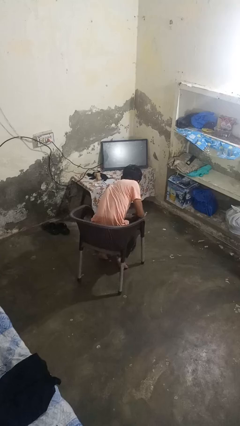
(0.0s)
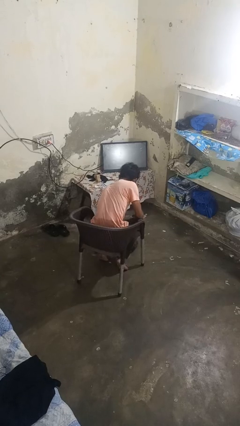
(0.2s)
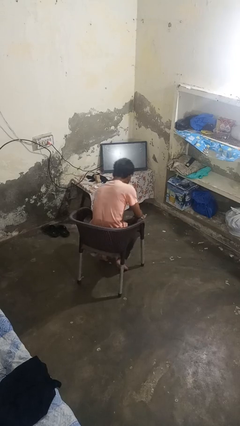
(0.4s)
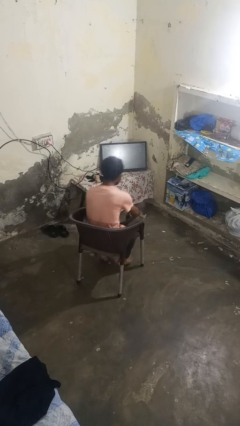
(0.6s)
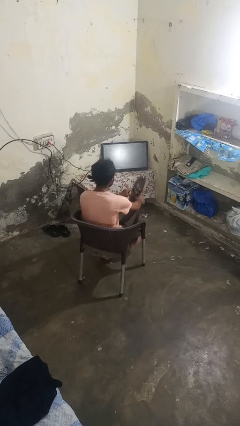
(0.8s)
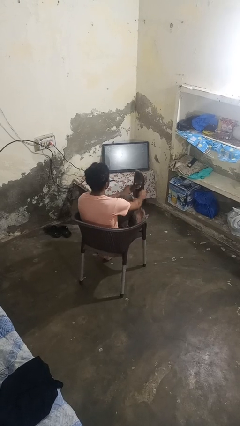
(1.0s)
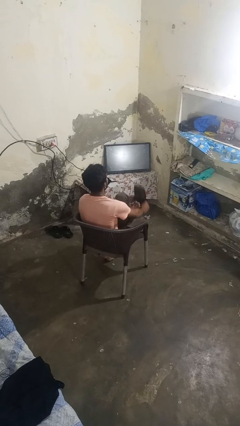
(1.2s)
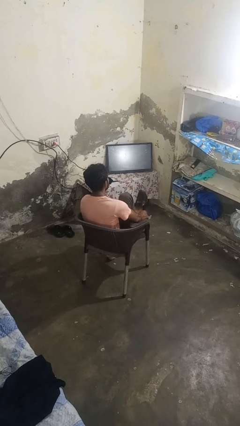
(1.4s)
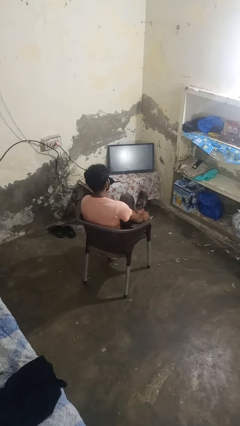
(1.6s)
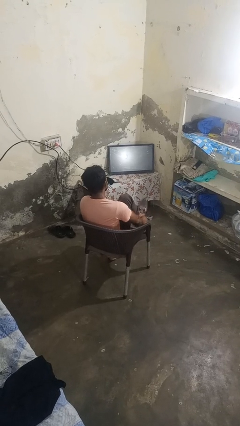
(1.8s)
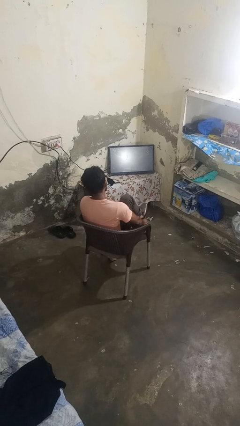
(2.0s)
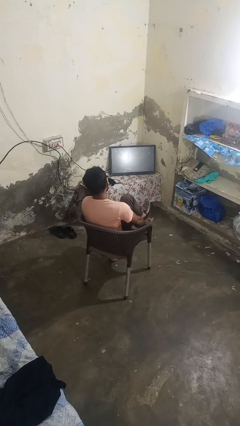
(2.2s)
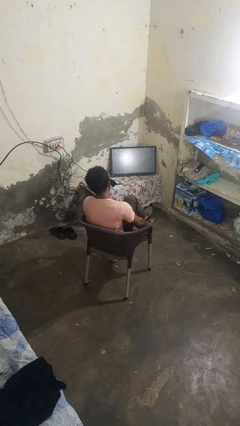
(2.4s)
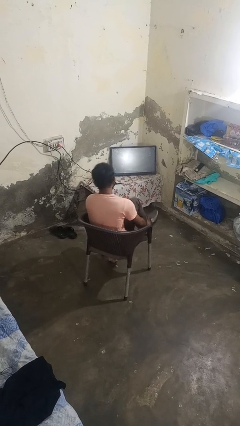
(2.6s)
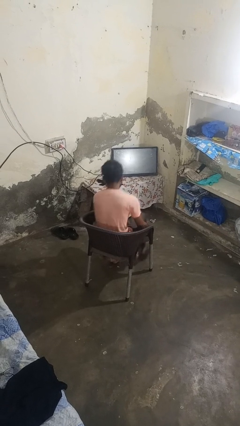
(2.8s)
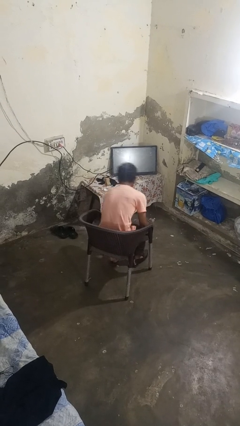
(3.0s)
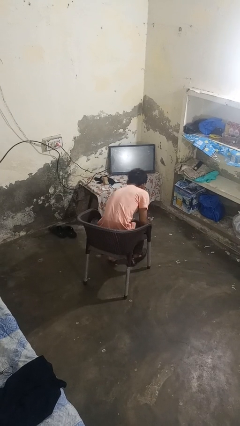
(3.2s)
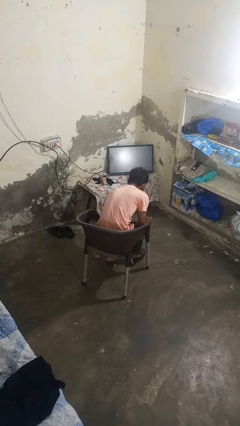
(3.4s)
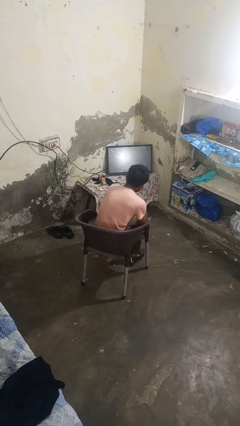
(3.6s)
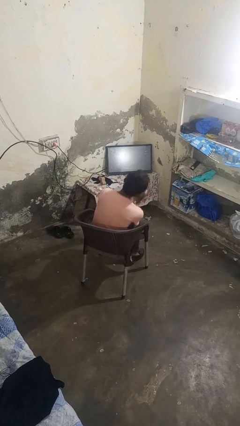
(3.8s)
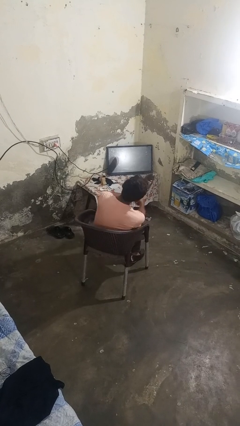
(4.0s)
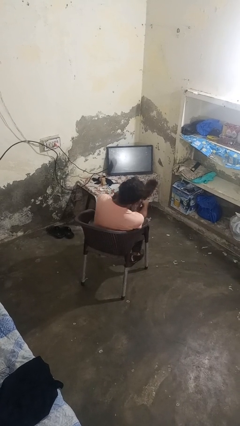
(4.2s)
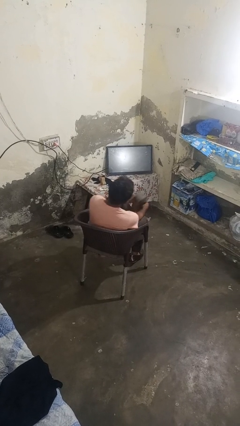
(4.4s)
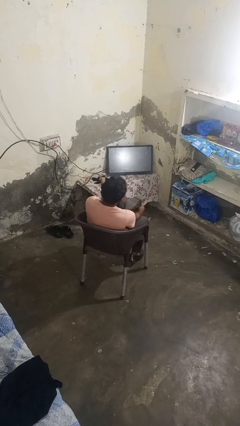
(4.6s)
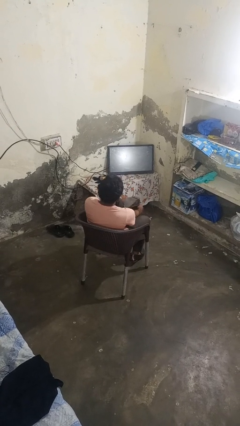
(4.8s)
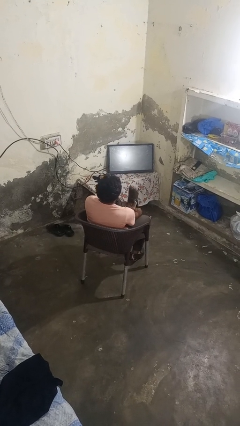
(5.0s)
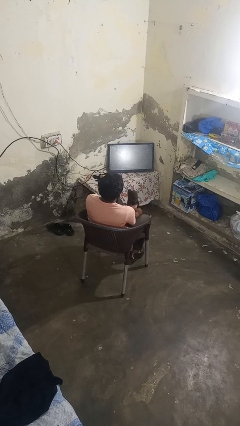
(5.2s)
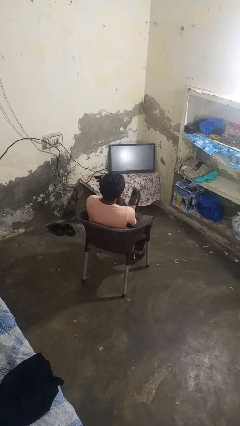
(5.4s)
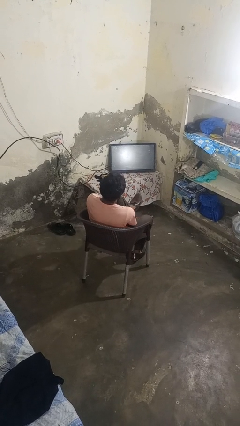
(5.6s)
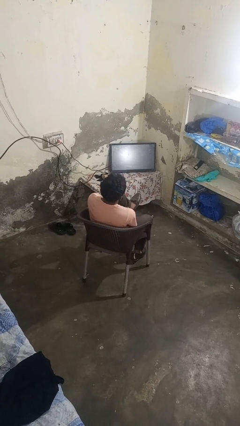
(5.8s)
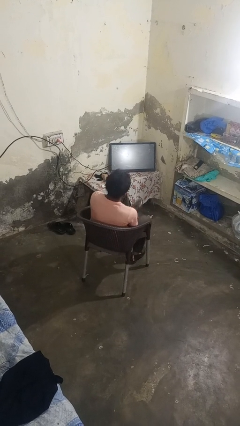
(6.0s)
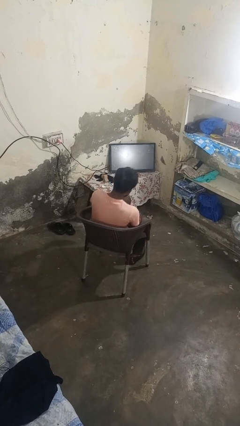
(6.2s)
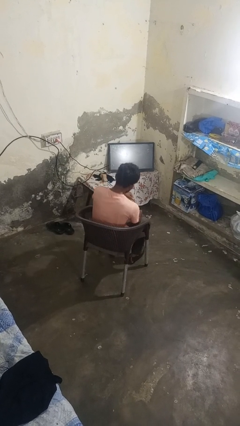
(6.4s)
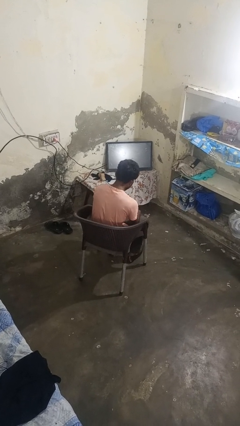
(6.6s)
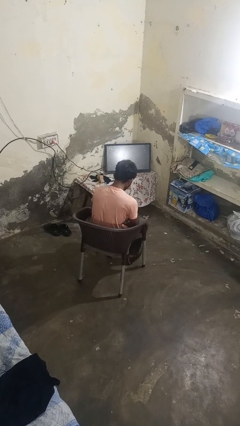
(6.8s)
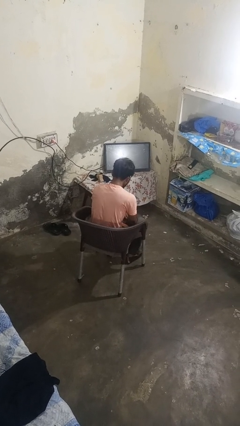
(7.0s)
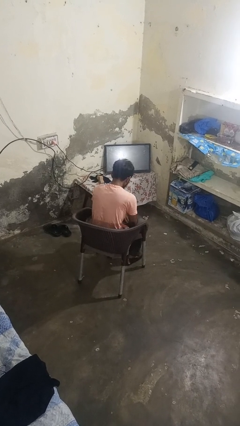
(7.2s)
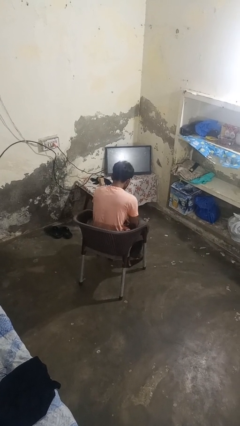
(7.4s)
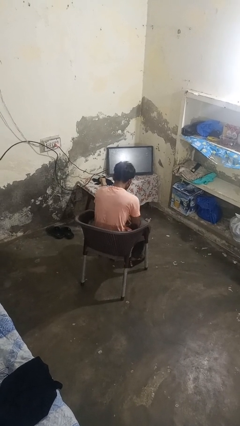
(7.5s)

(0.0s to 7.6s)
person puts on shoes

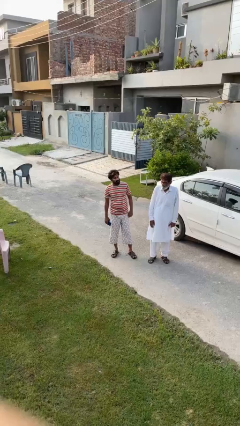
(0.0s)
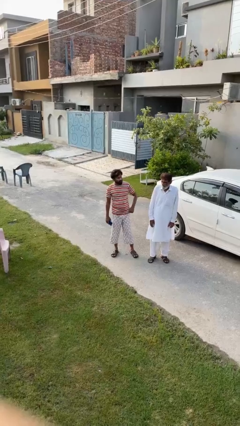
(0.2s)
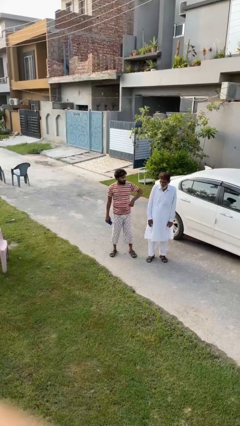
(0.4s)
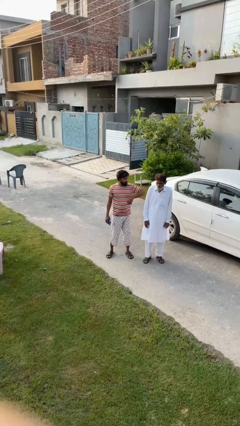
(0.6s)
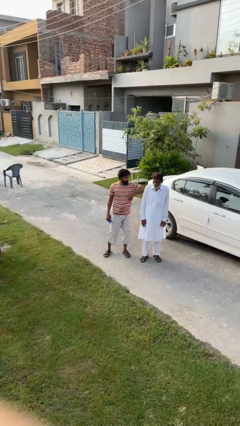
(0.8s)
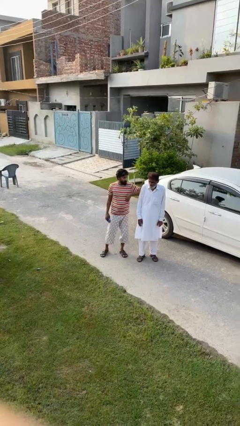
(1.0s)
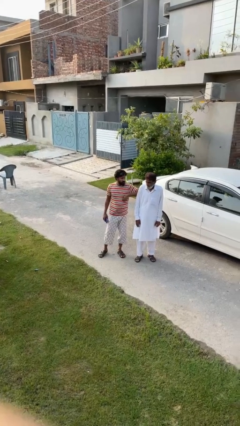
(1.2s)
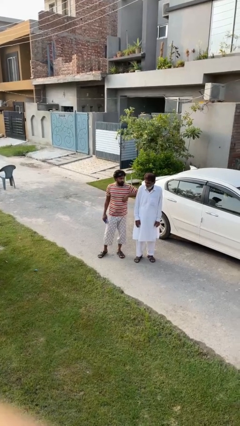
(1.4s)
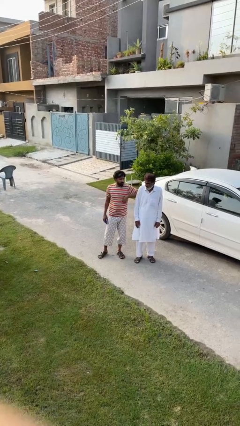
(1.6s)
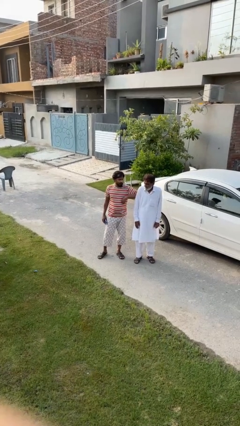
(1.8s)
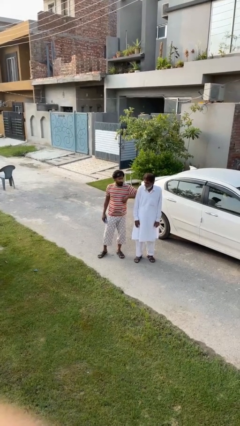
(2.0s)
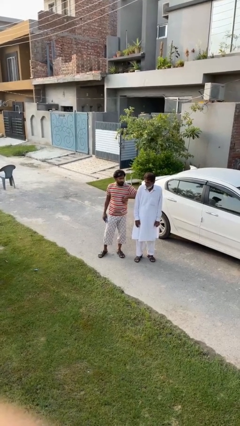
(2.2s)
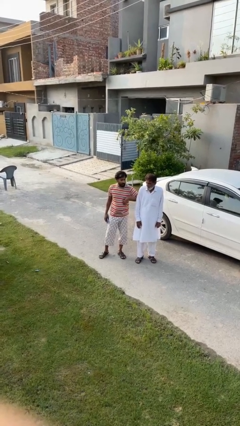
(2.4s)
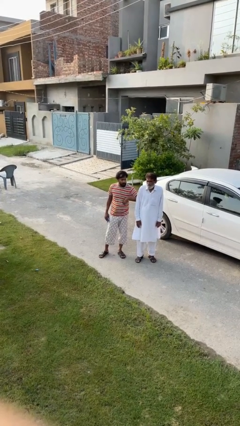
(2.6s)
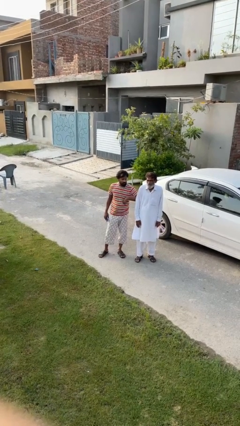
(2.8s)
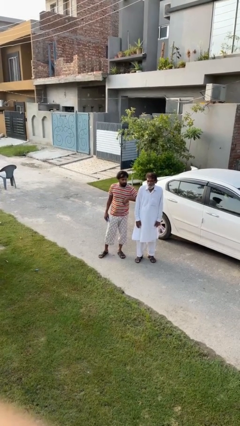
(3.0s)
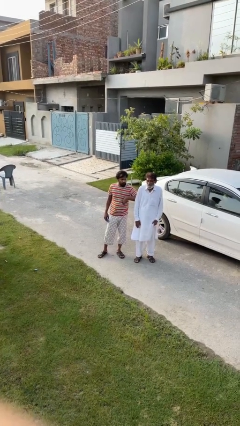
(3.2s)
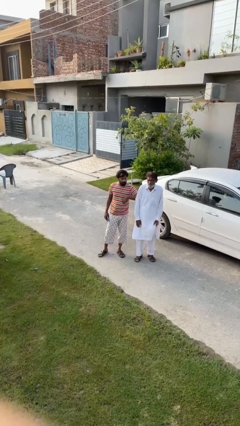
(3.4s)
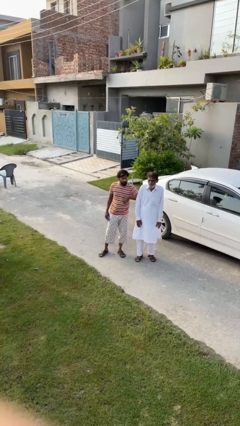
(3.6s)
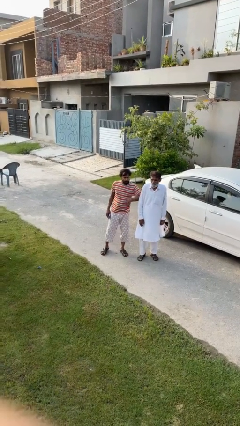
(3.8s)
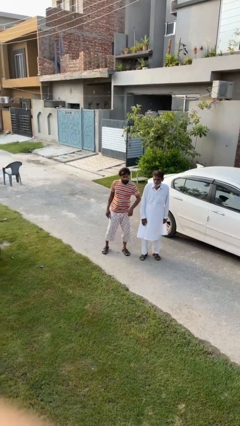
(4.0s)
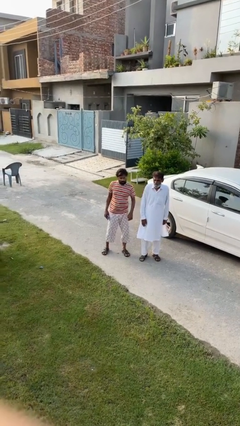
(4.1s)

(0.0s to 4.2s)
person nudges person with elbow

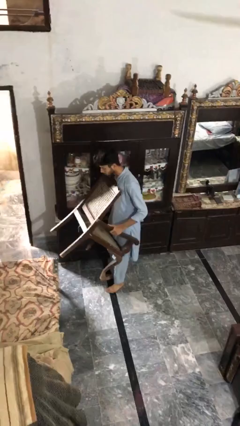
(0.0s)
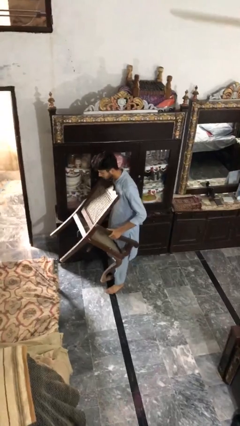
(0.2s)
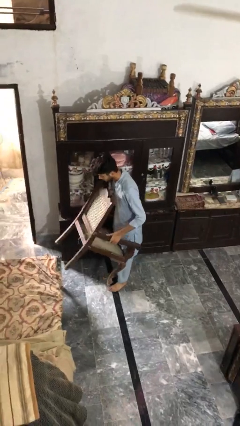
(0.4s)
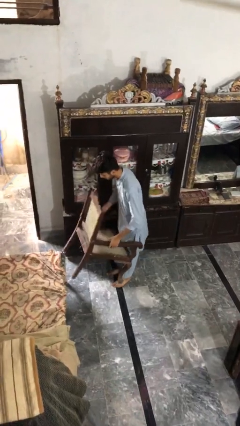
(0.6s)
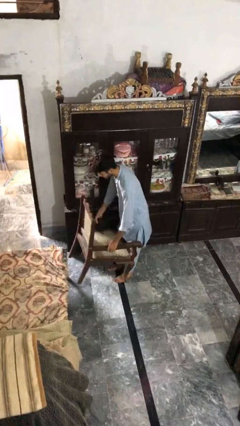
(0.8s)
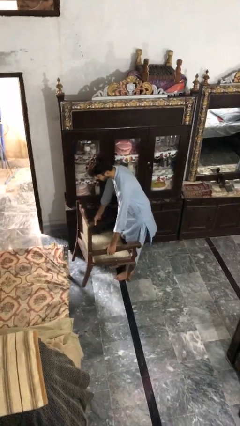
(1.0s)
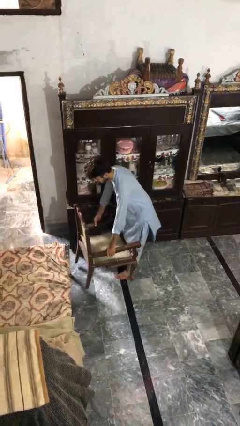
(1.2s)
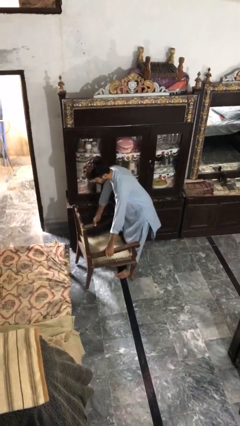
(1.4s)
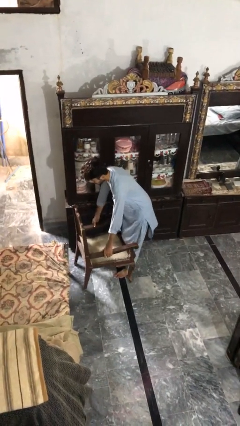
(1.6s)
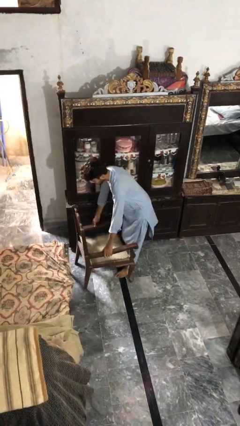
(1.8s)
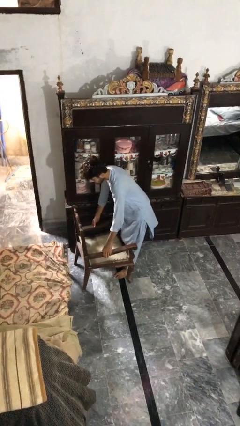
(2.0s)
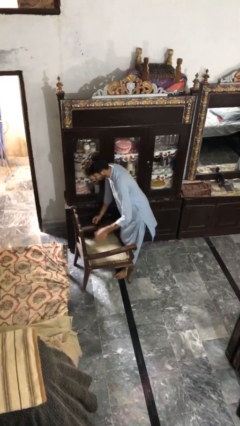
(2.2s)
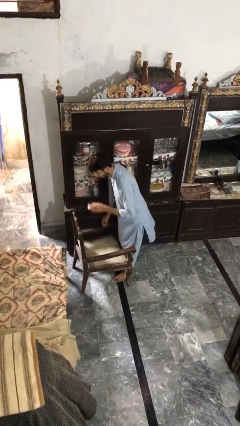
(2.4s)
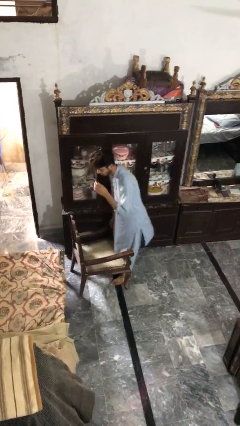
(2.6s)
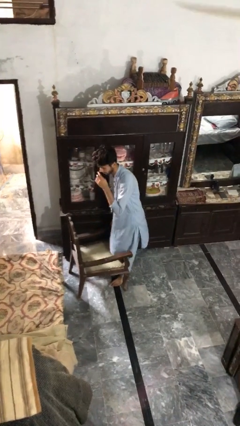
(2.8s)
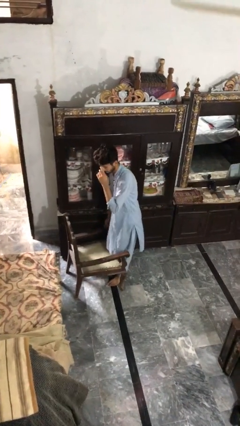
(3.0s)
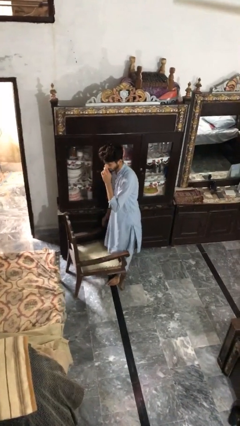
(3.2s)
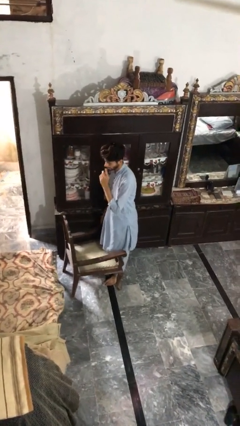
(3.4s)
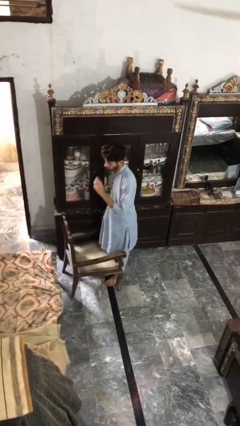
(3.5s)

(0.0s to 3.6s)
person puts down object on floor

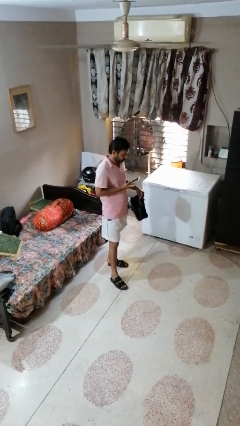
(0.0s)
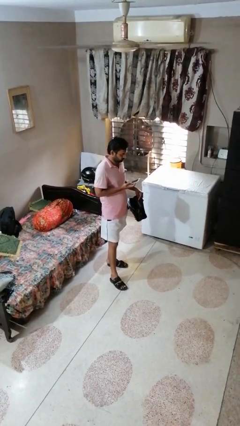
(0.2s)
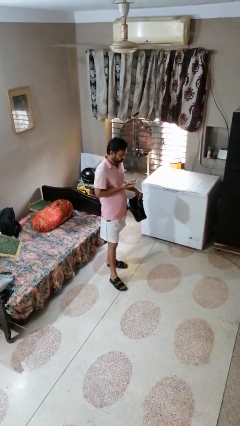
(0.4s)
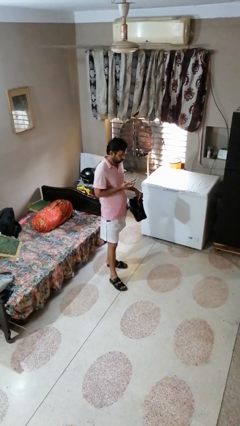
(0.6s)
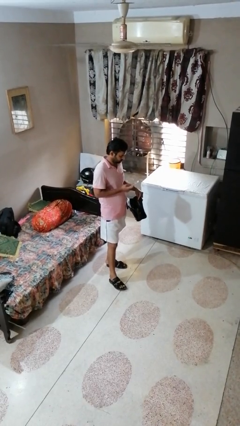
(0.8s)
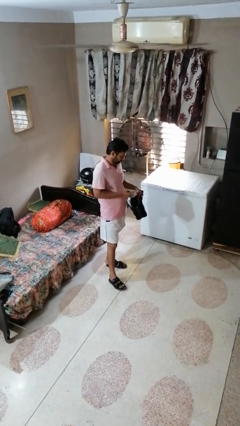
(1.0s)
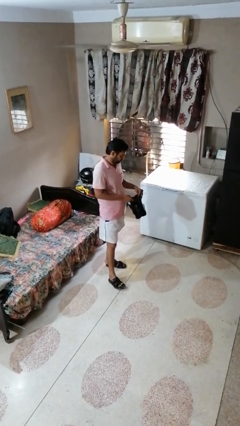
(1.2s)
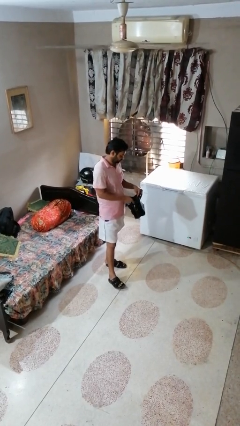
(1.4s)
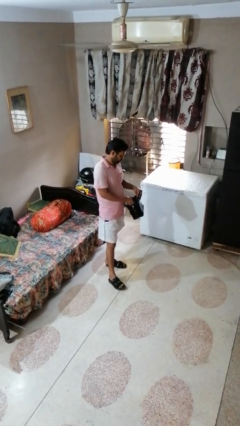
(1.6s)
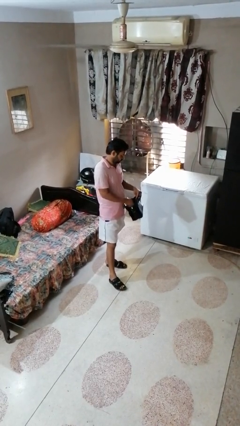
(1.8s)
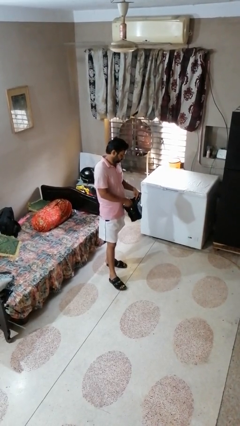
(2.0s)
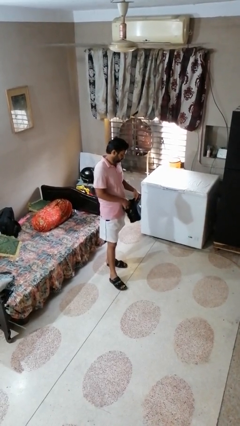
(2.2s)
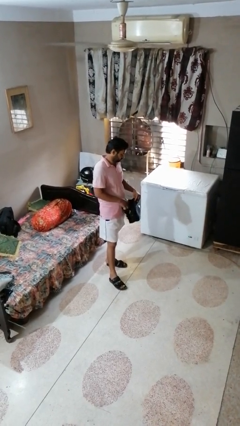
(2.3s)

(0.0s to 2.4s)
person puts object into purse
